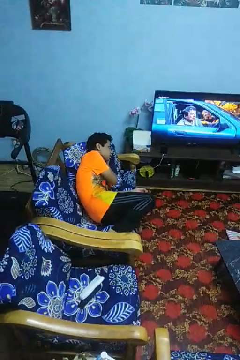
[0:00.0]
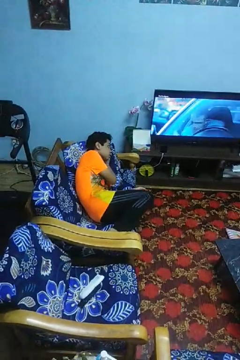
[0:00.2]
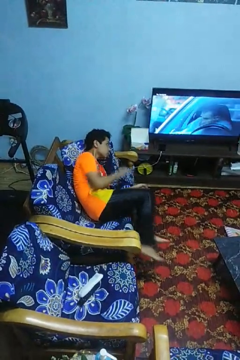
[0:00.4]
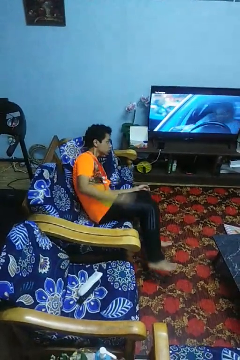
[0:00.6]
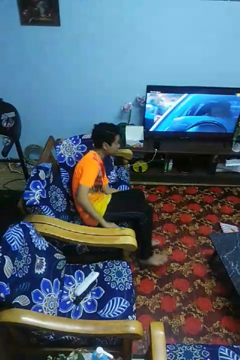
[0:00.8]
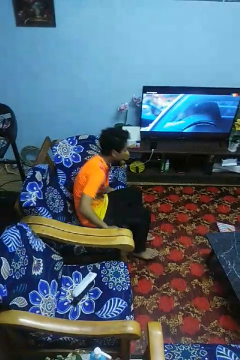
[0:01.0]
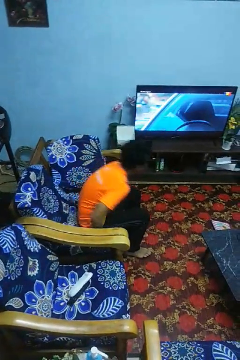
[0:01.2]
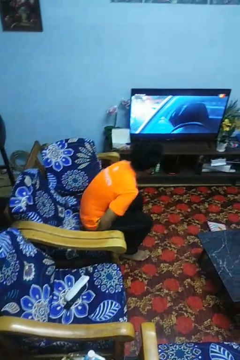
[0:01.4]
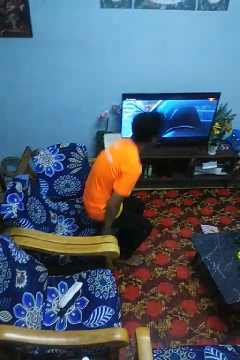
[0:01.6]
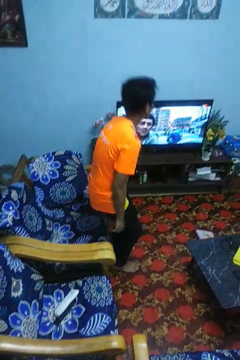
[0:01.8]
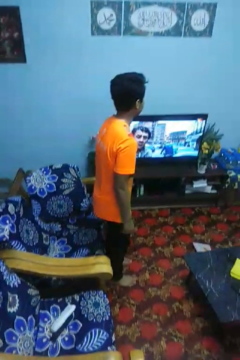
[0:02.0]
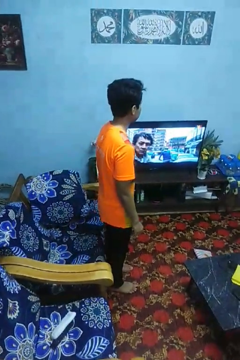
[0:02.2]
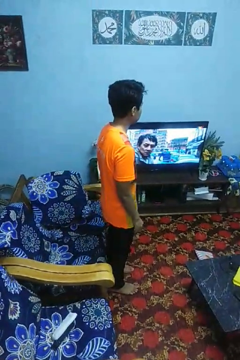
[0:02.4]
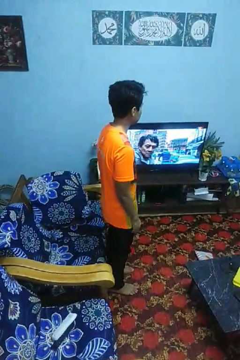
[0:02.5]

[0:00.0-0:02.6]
person stands up

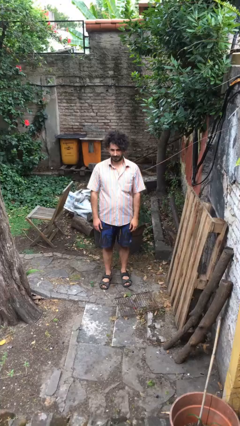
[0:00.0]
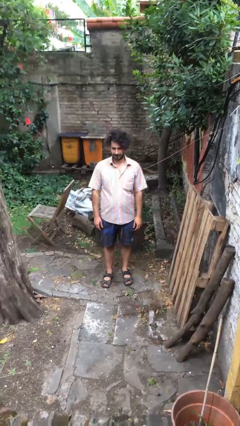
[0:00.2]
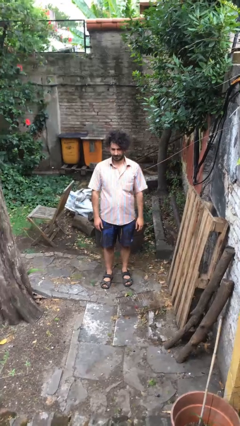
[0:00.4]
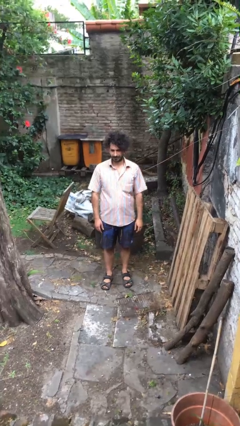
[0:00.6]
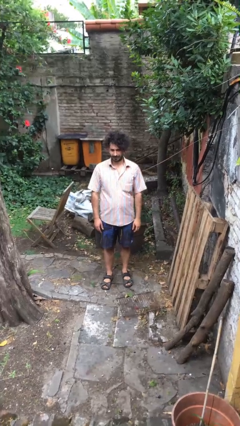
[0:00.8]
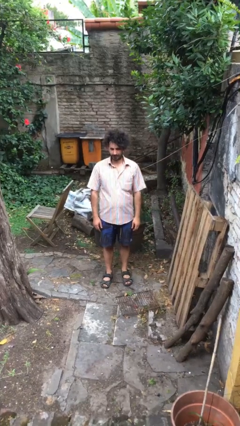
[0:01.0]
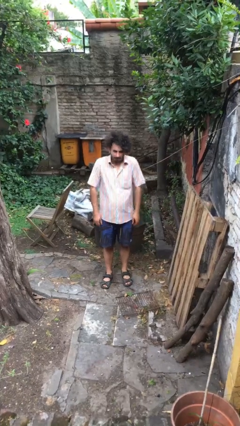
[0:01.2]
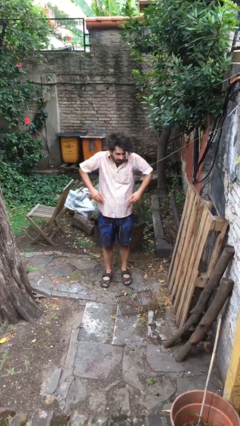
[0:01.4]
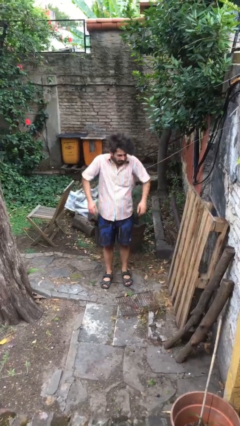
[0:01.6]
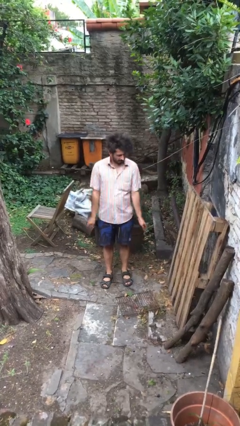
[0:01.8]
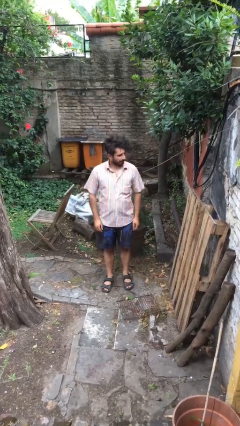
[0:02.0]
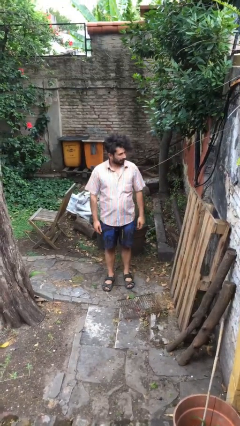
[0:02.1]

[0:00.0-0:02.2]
person shrugs

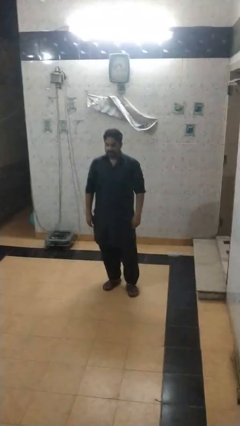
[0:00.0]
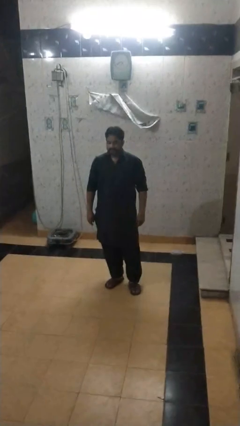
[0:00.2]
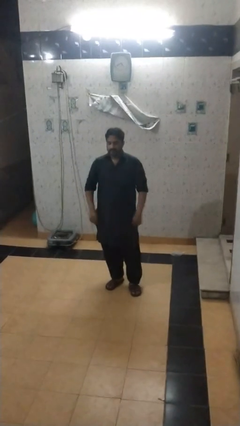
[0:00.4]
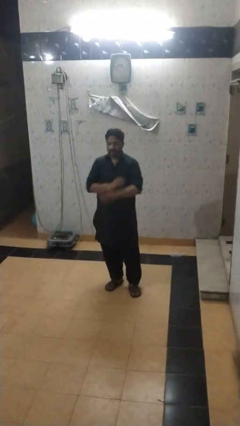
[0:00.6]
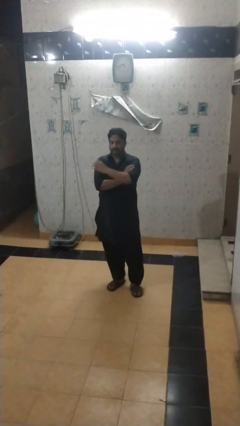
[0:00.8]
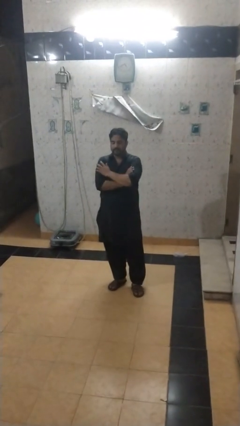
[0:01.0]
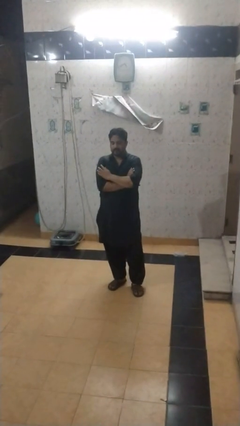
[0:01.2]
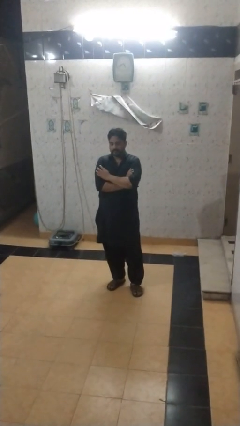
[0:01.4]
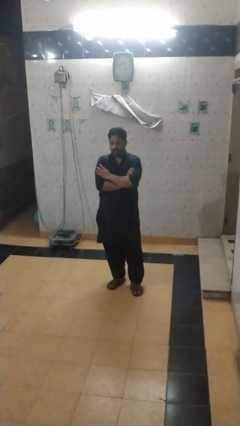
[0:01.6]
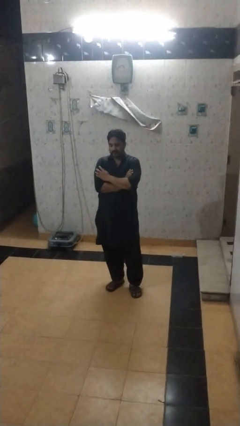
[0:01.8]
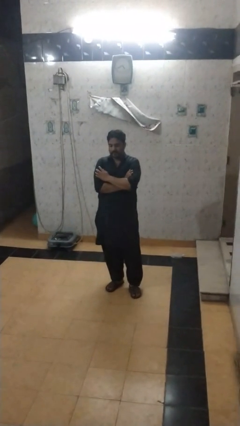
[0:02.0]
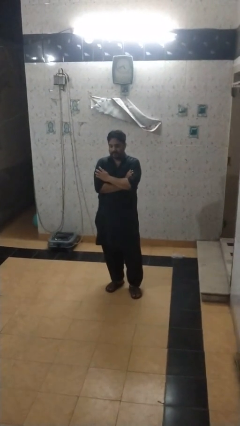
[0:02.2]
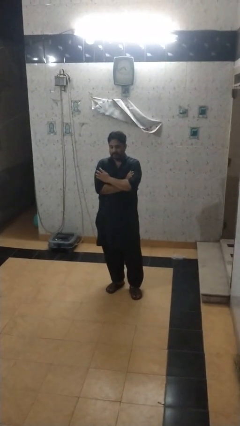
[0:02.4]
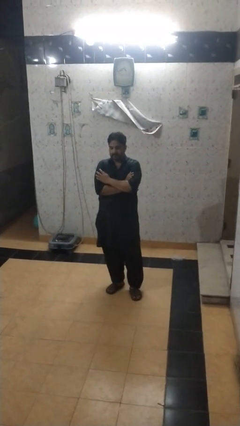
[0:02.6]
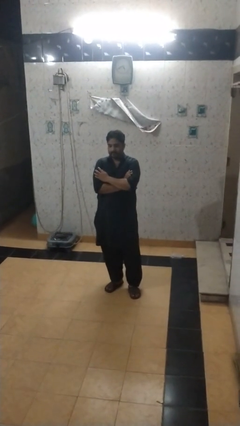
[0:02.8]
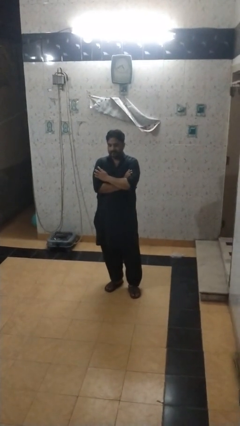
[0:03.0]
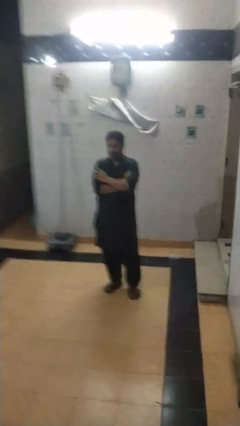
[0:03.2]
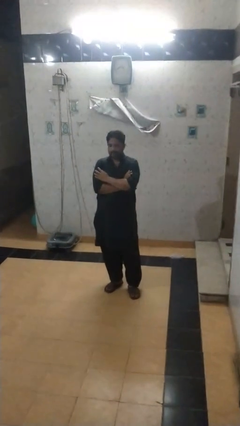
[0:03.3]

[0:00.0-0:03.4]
person crosses arms

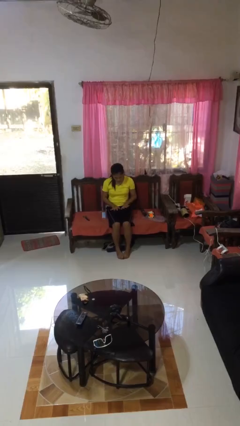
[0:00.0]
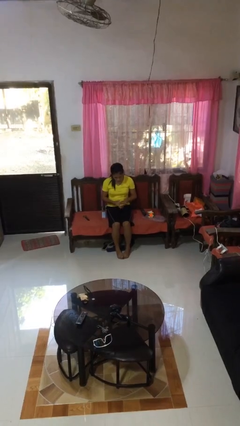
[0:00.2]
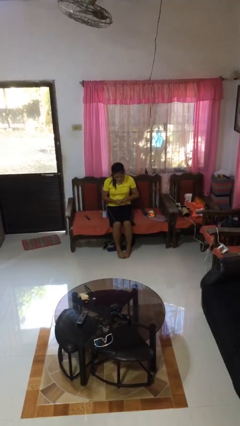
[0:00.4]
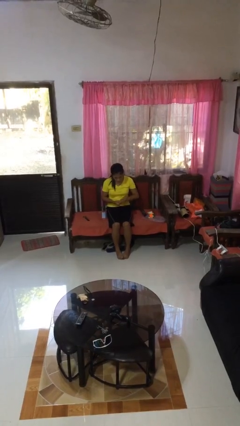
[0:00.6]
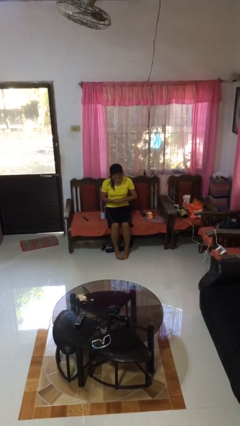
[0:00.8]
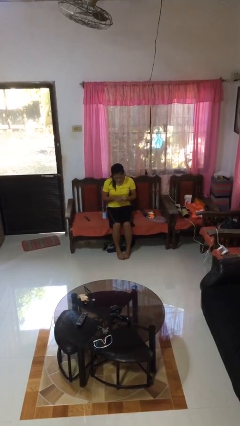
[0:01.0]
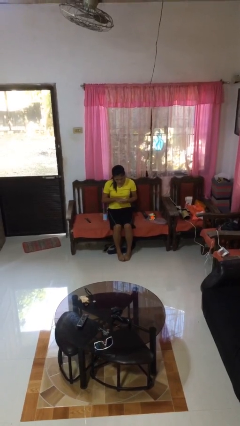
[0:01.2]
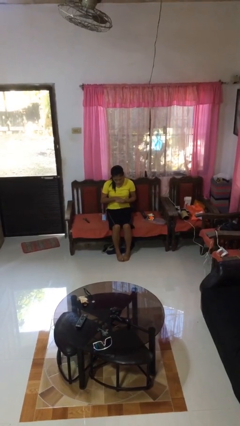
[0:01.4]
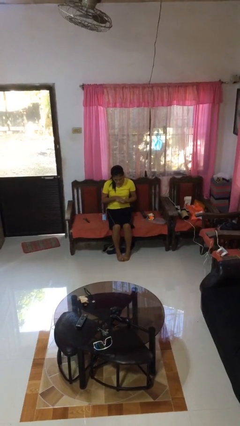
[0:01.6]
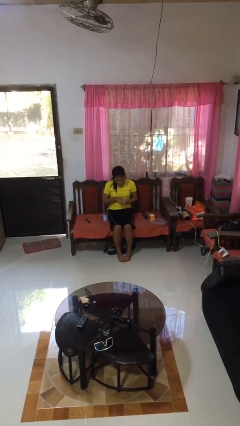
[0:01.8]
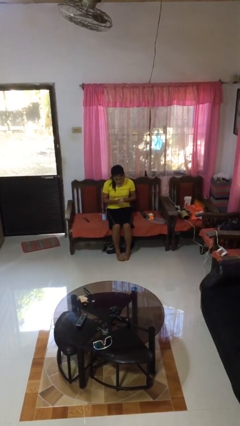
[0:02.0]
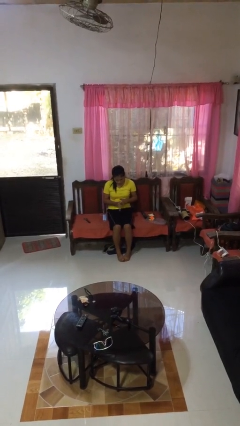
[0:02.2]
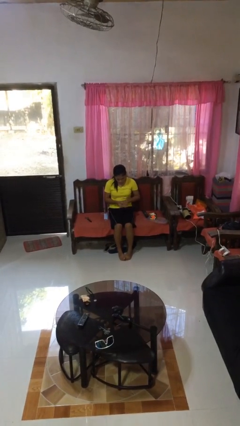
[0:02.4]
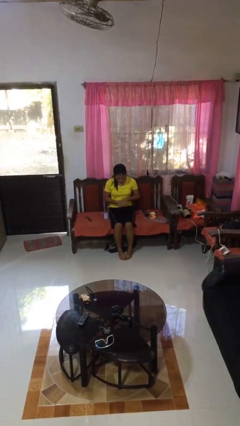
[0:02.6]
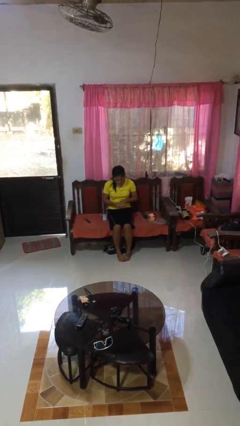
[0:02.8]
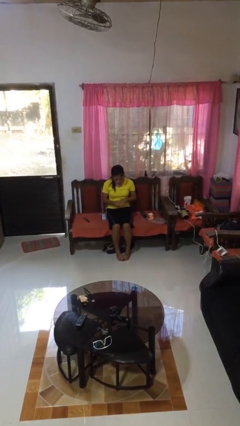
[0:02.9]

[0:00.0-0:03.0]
person looks at hands in lap

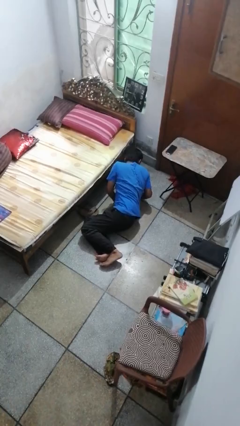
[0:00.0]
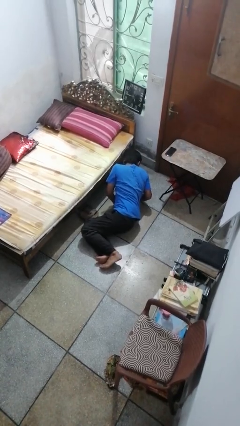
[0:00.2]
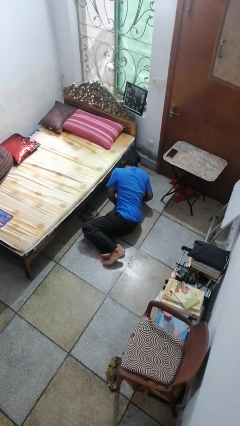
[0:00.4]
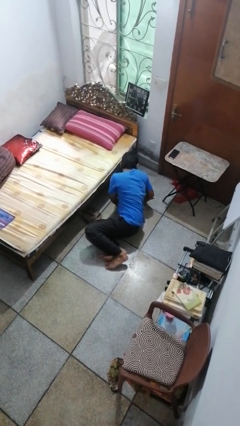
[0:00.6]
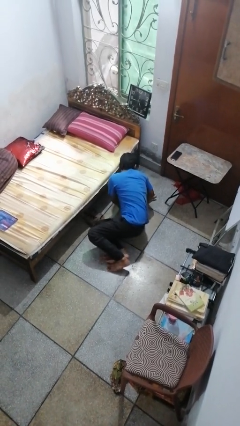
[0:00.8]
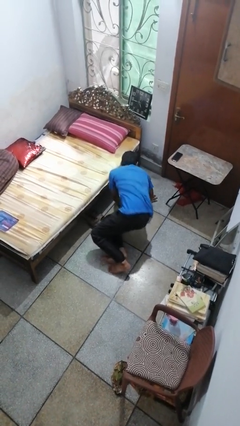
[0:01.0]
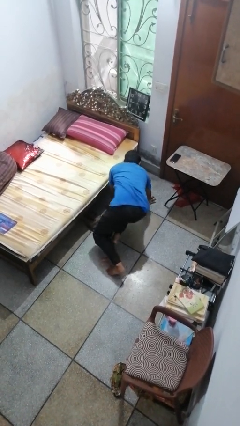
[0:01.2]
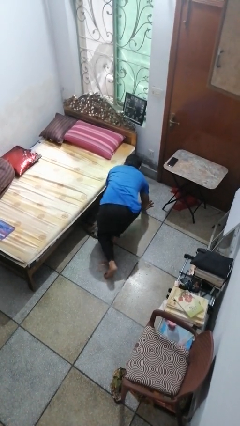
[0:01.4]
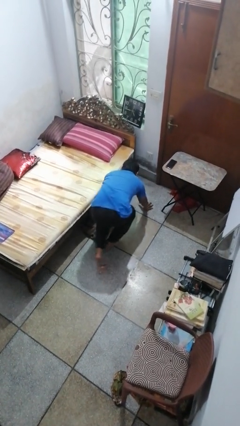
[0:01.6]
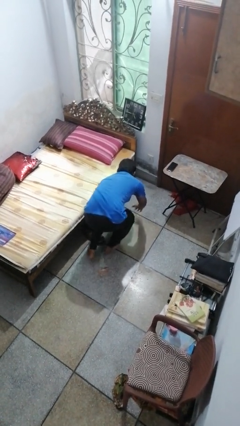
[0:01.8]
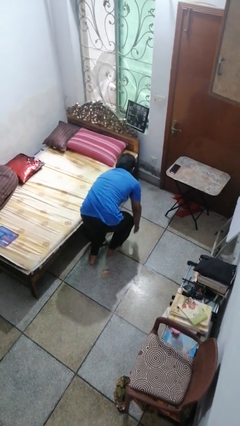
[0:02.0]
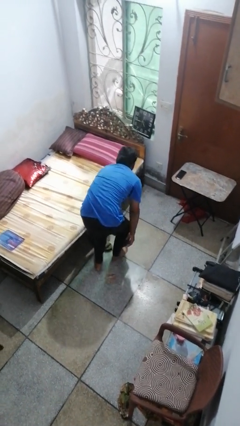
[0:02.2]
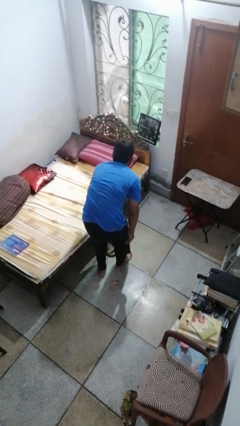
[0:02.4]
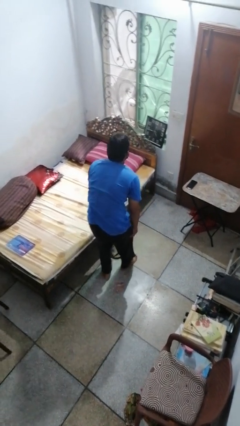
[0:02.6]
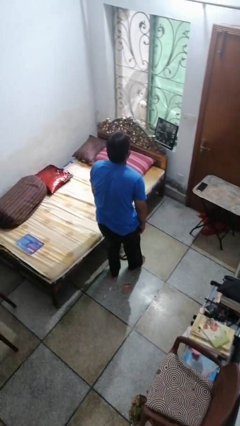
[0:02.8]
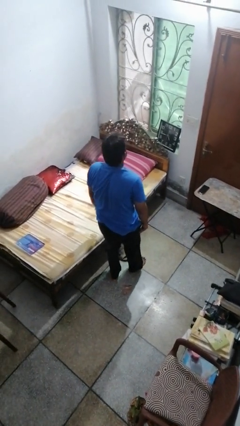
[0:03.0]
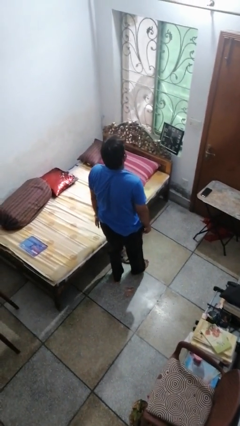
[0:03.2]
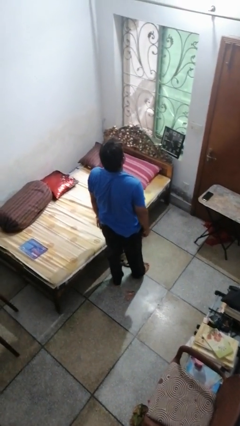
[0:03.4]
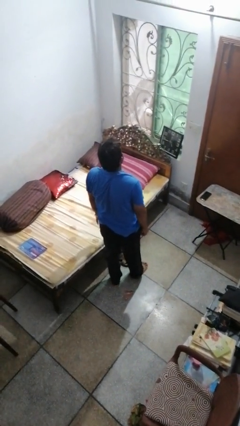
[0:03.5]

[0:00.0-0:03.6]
person stands up from floor

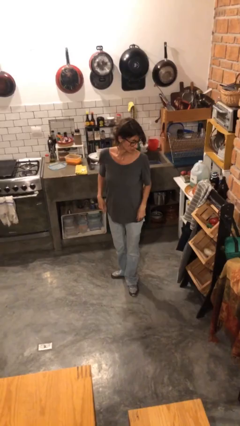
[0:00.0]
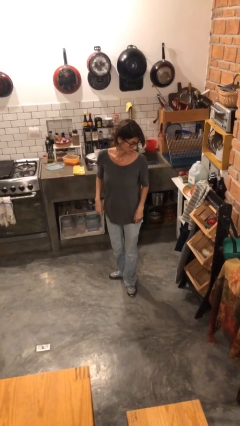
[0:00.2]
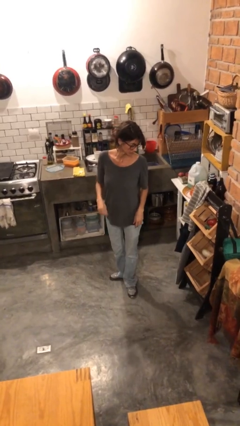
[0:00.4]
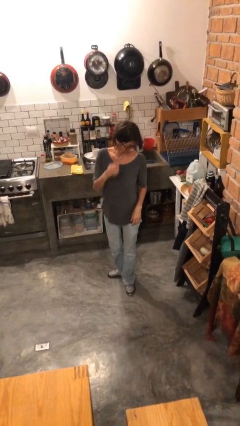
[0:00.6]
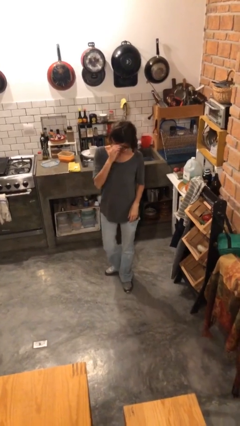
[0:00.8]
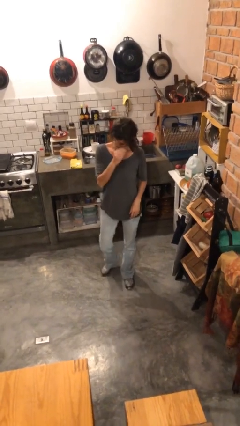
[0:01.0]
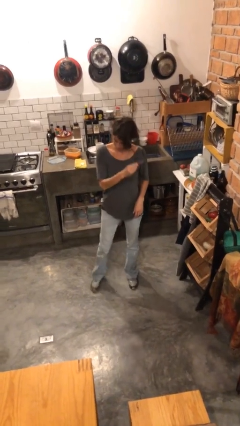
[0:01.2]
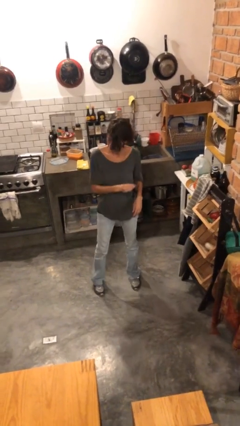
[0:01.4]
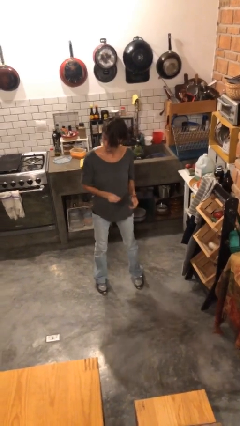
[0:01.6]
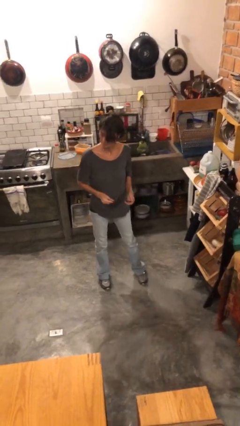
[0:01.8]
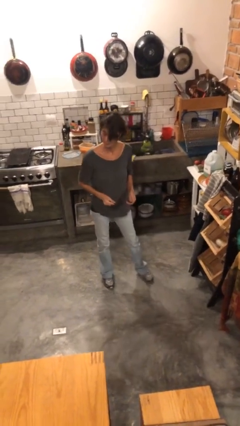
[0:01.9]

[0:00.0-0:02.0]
person takes off glasses

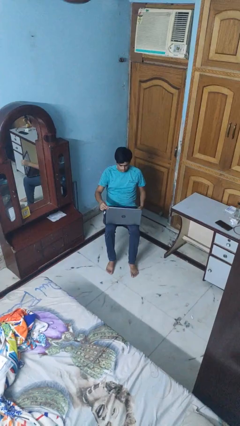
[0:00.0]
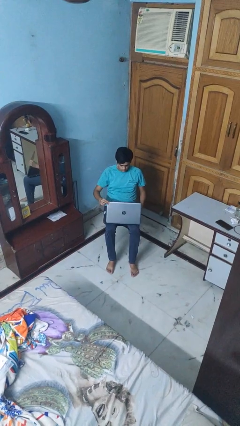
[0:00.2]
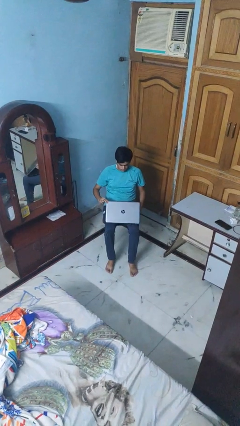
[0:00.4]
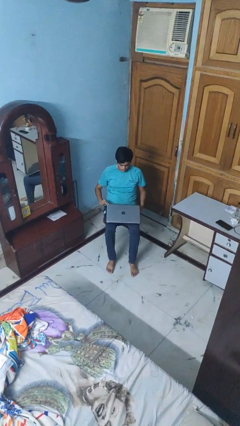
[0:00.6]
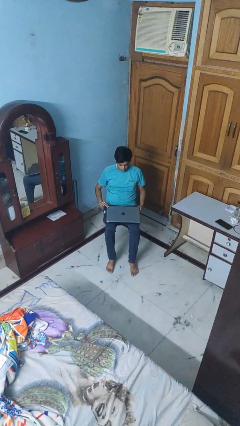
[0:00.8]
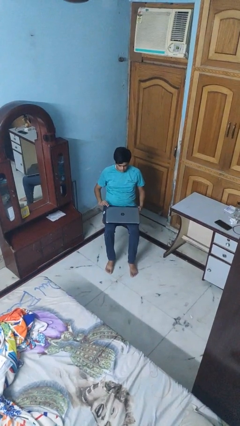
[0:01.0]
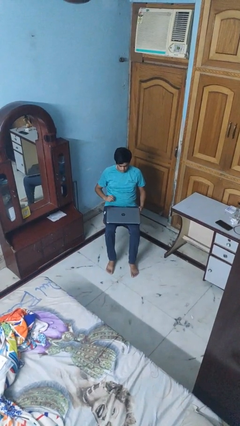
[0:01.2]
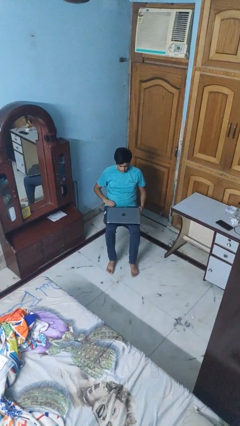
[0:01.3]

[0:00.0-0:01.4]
person closes laptop
